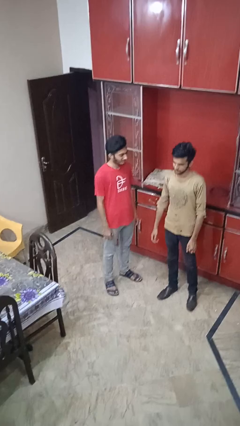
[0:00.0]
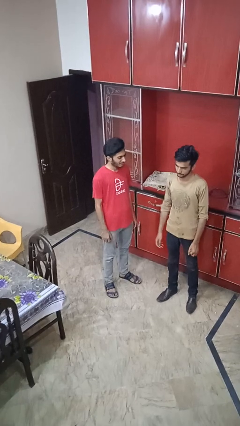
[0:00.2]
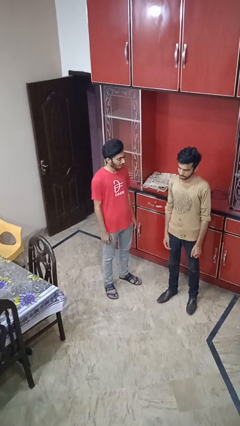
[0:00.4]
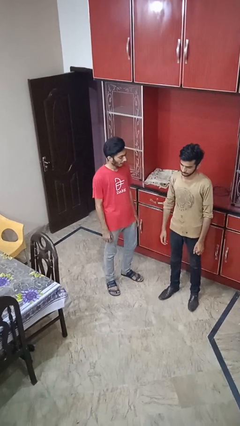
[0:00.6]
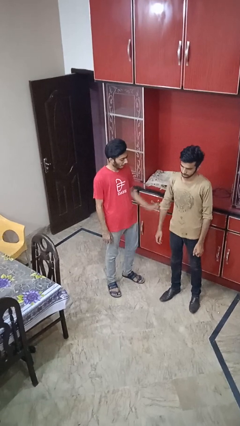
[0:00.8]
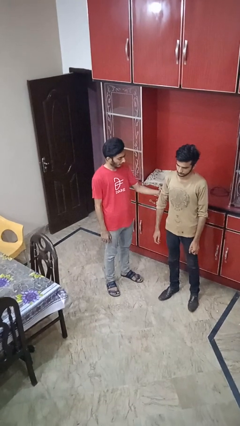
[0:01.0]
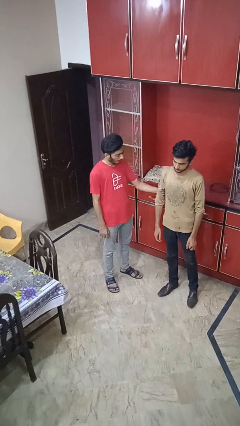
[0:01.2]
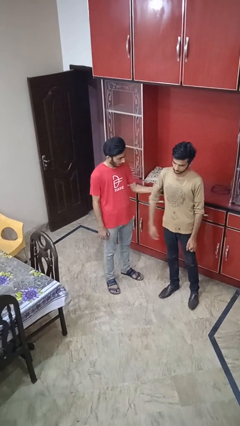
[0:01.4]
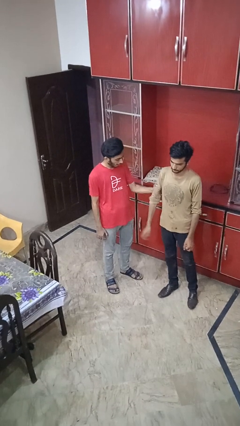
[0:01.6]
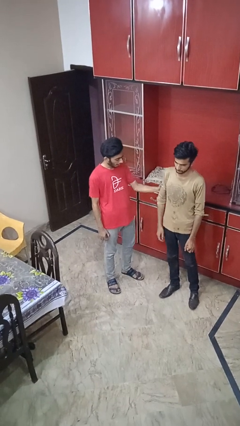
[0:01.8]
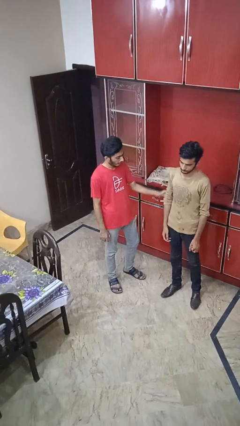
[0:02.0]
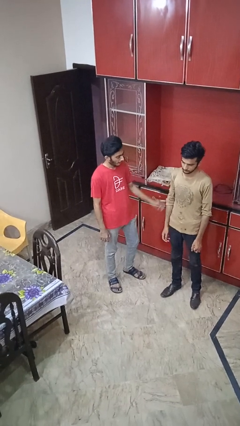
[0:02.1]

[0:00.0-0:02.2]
person grabs person by bicep

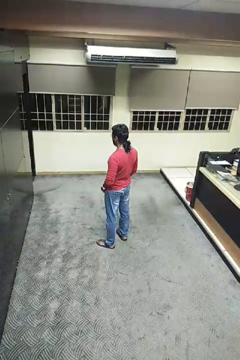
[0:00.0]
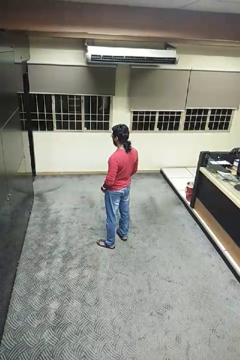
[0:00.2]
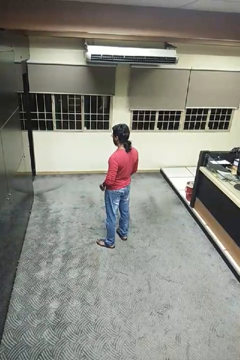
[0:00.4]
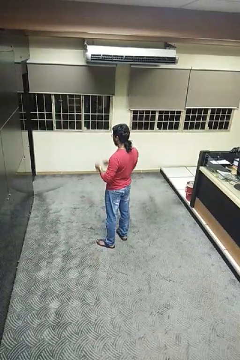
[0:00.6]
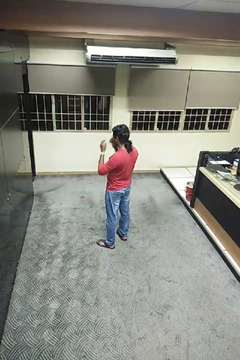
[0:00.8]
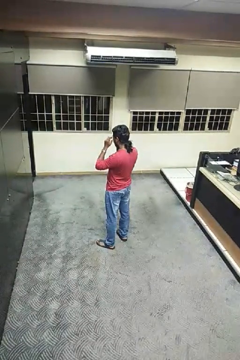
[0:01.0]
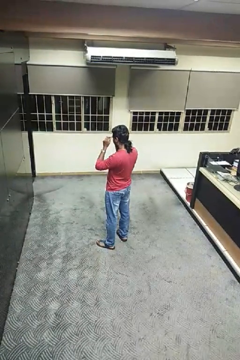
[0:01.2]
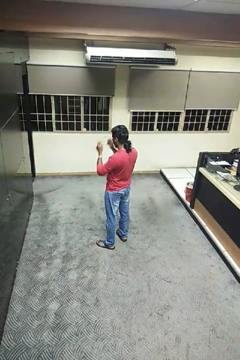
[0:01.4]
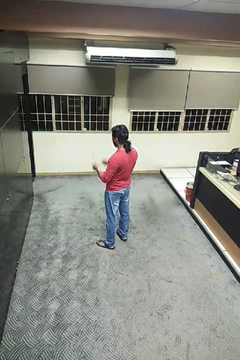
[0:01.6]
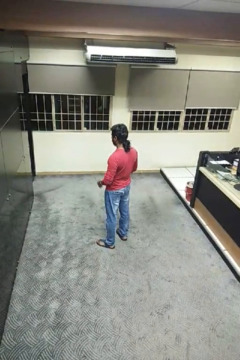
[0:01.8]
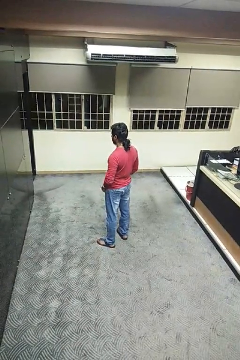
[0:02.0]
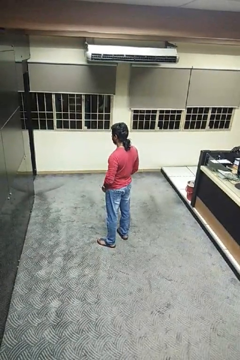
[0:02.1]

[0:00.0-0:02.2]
person takes off glasses

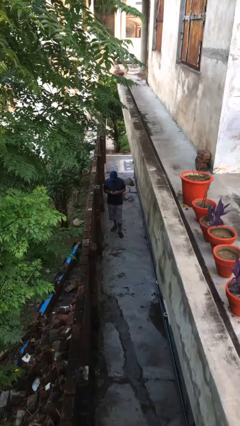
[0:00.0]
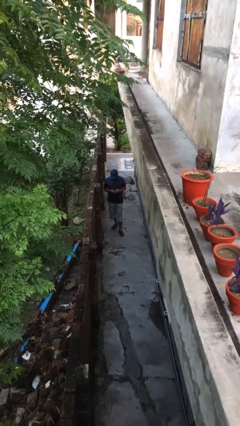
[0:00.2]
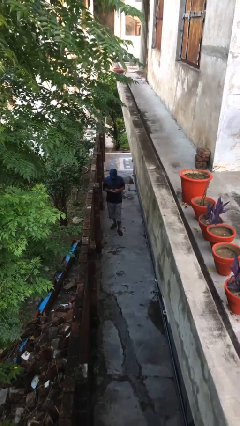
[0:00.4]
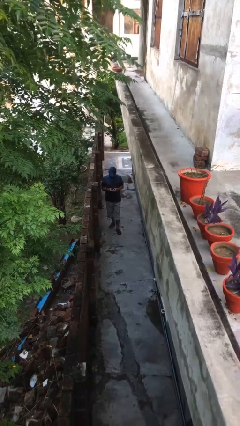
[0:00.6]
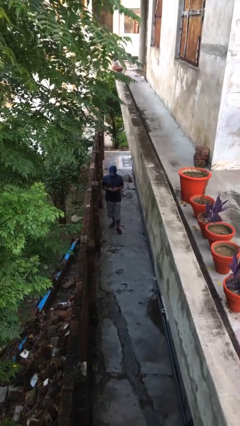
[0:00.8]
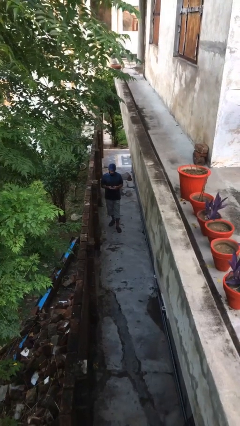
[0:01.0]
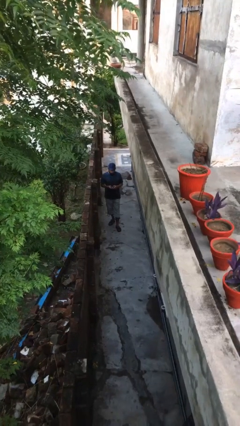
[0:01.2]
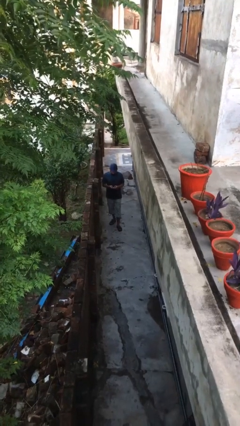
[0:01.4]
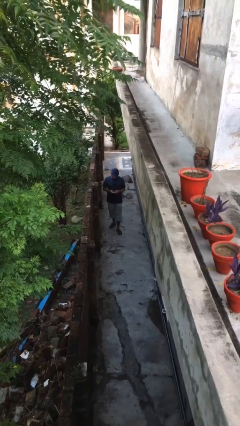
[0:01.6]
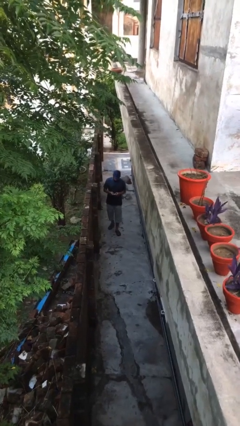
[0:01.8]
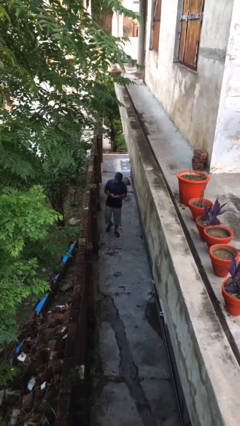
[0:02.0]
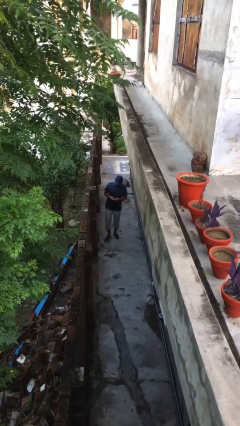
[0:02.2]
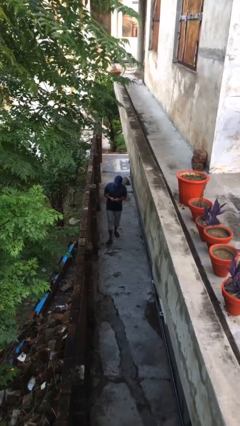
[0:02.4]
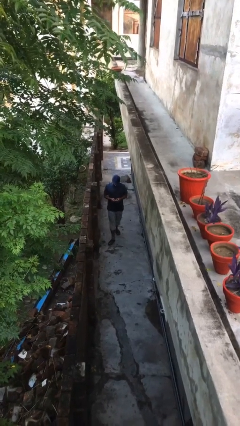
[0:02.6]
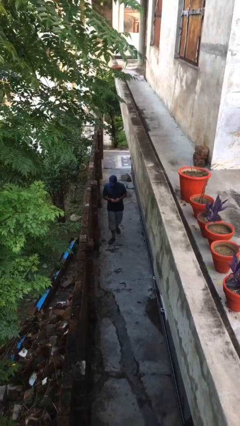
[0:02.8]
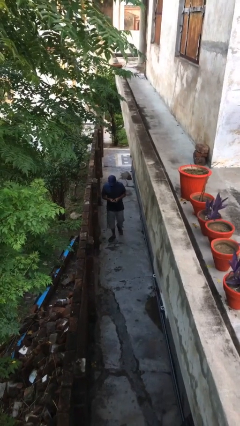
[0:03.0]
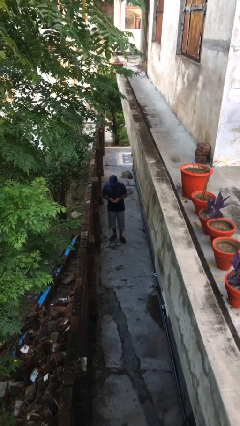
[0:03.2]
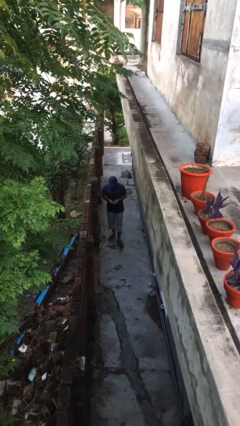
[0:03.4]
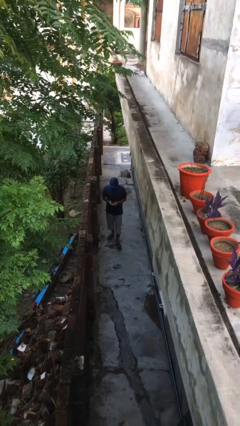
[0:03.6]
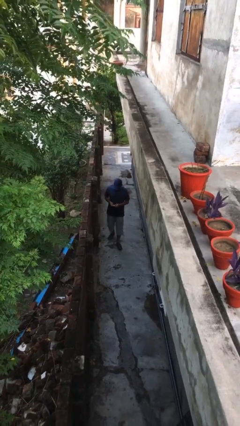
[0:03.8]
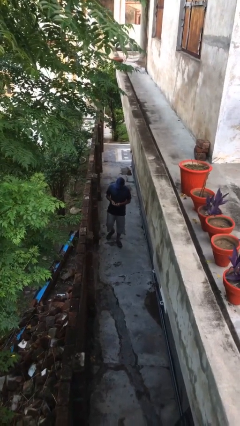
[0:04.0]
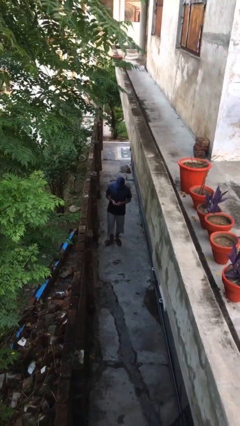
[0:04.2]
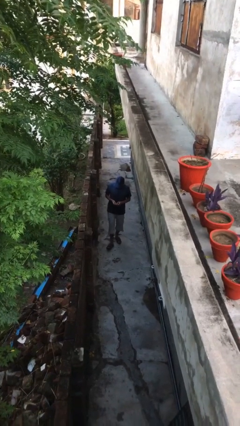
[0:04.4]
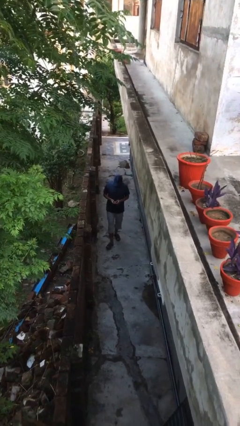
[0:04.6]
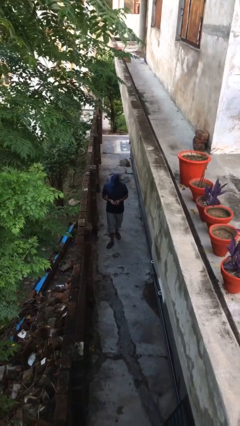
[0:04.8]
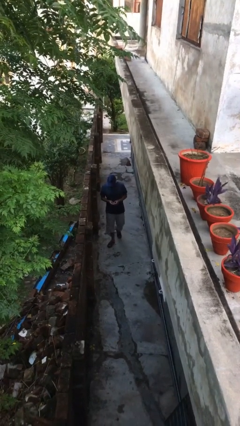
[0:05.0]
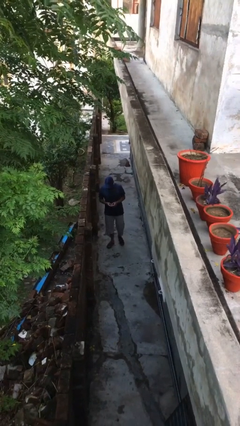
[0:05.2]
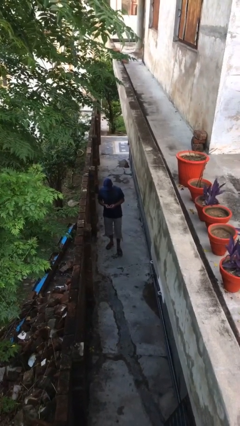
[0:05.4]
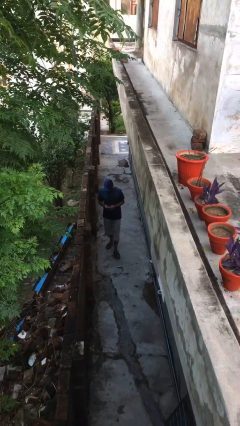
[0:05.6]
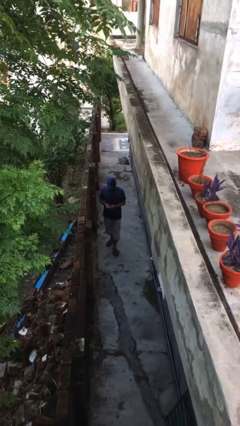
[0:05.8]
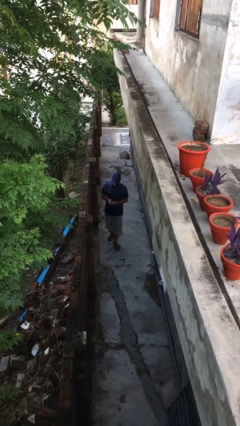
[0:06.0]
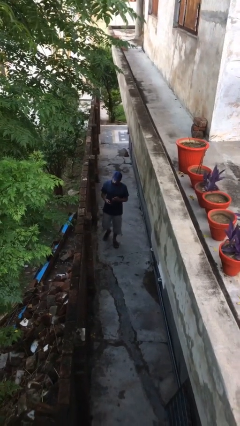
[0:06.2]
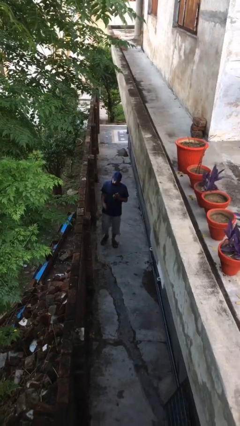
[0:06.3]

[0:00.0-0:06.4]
person texts on phone

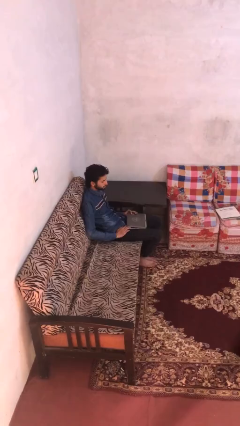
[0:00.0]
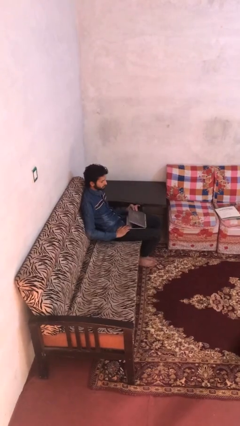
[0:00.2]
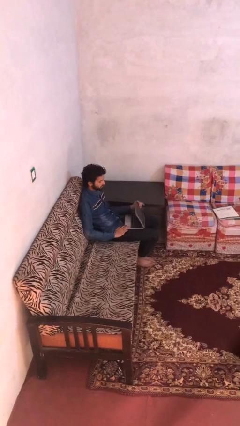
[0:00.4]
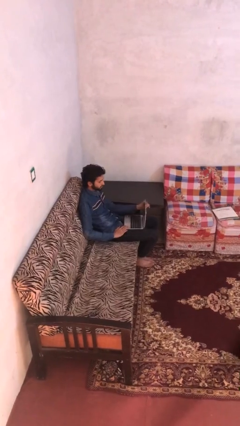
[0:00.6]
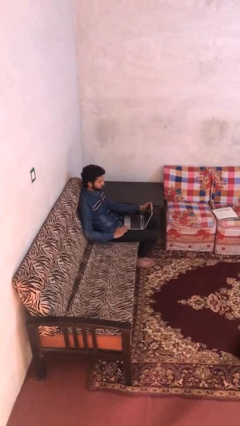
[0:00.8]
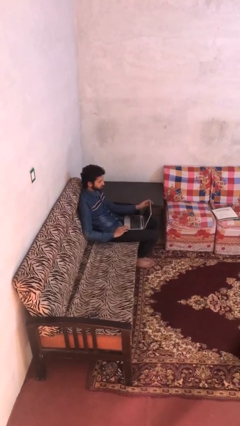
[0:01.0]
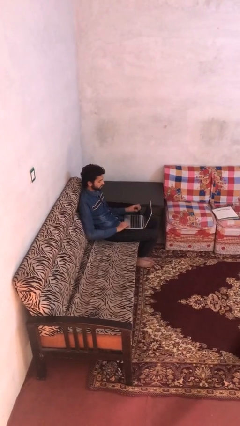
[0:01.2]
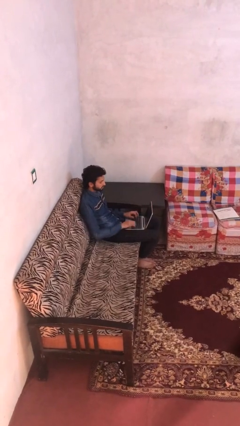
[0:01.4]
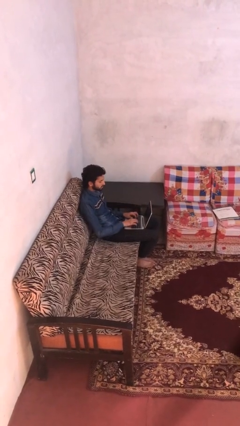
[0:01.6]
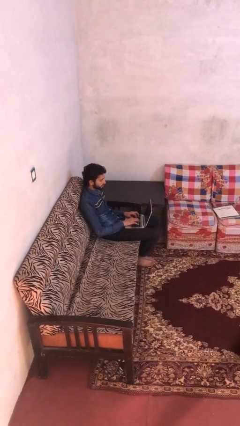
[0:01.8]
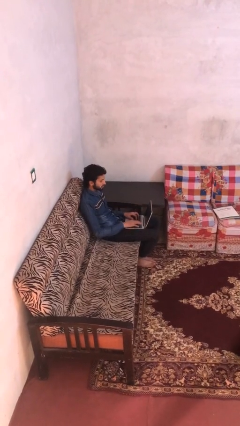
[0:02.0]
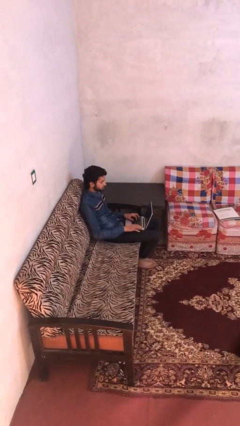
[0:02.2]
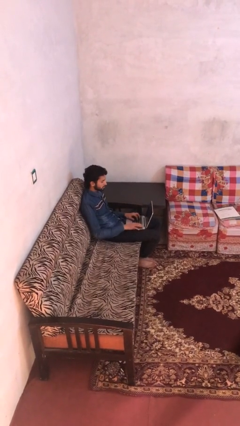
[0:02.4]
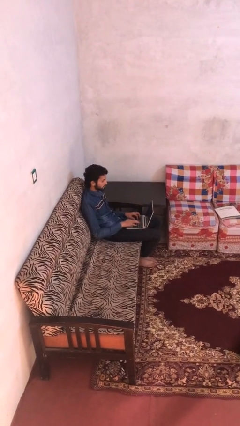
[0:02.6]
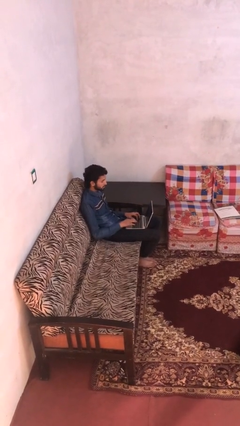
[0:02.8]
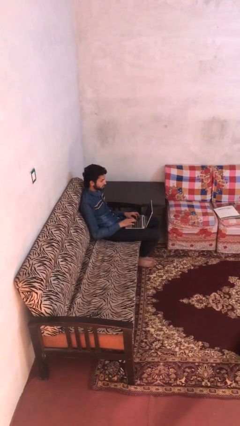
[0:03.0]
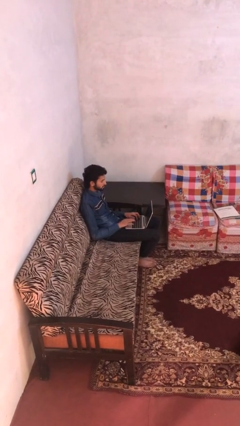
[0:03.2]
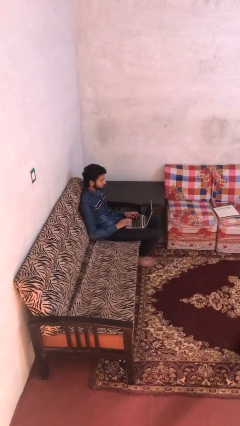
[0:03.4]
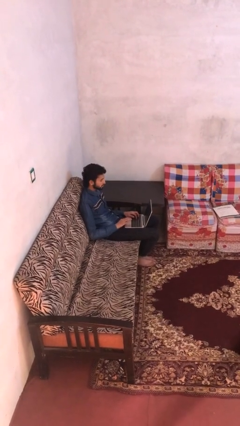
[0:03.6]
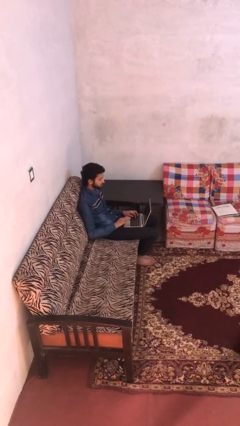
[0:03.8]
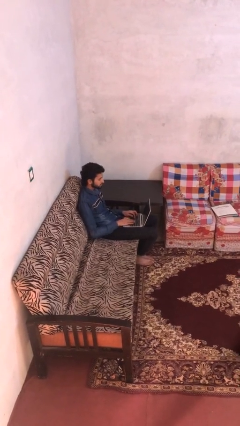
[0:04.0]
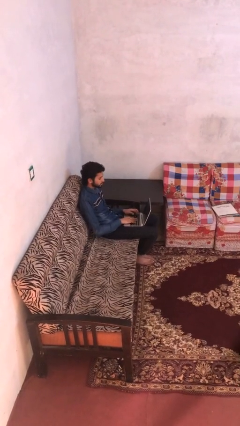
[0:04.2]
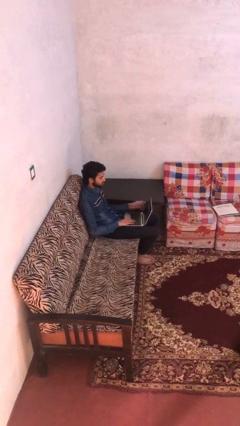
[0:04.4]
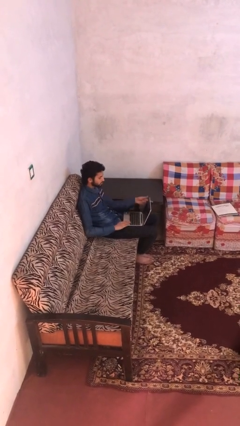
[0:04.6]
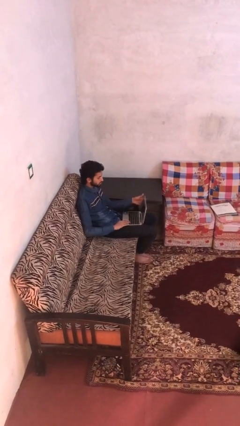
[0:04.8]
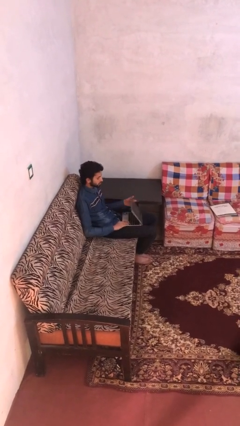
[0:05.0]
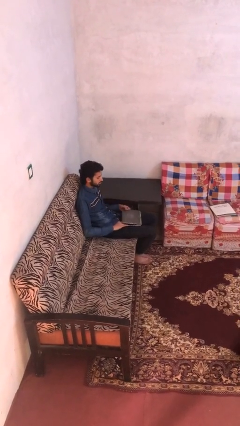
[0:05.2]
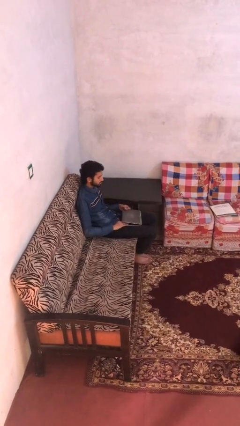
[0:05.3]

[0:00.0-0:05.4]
person interacts with laptop

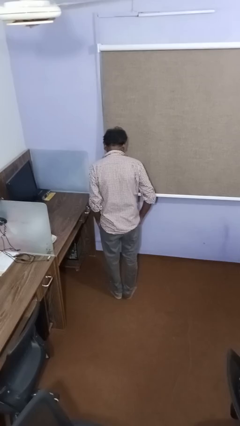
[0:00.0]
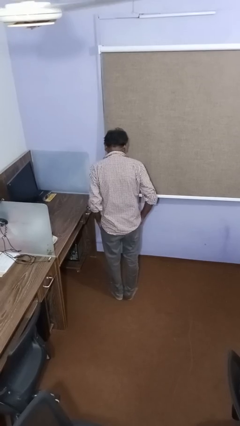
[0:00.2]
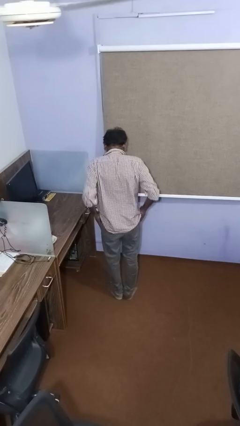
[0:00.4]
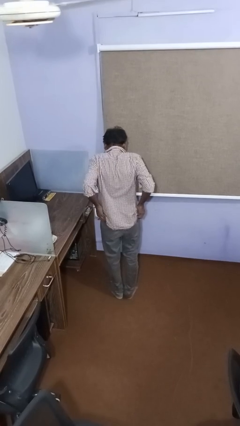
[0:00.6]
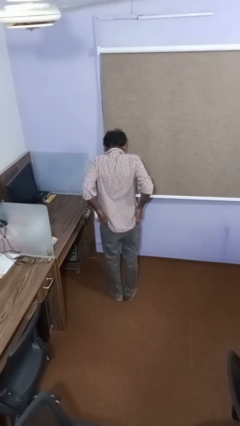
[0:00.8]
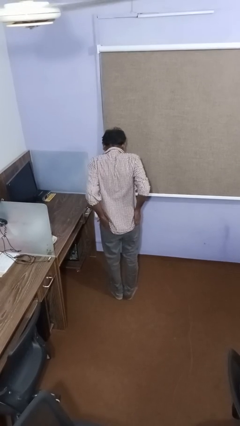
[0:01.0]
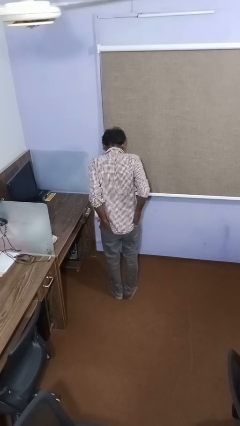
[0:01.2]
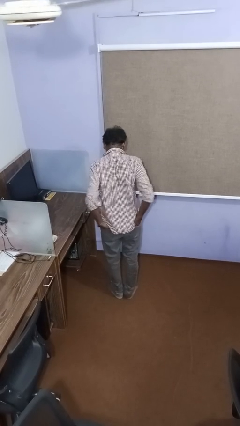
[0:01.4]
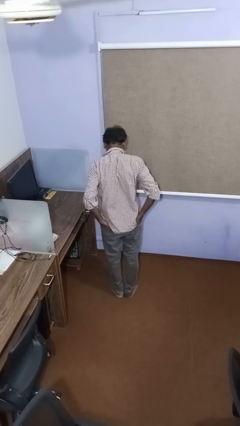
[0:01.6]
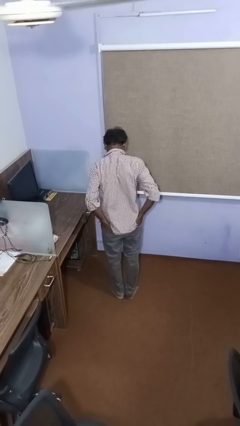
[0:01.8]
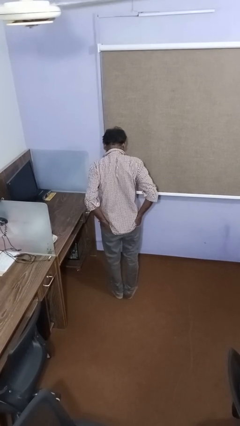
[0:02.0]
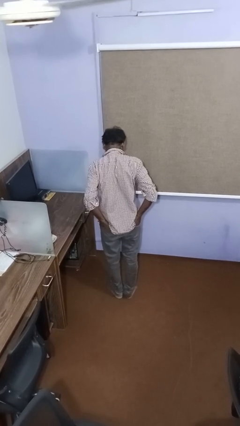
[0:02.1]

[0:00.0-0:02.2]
person puts hands in back pockets
